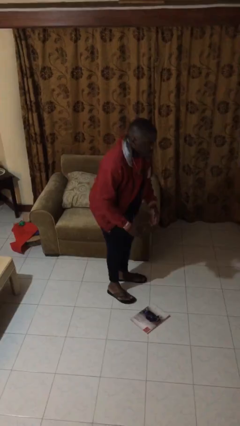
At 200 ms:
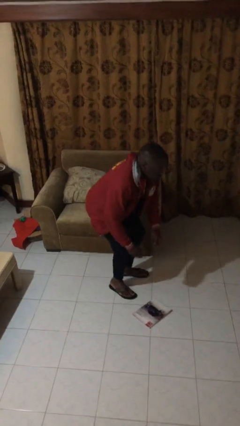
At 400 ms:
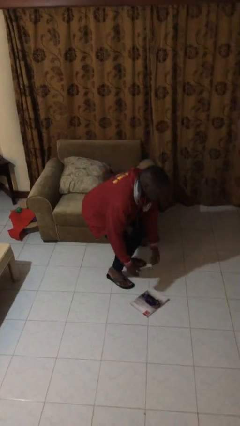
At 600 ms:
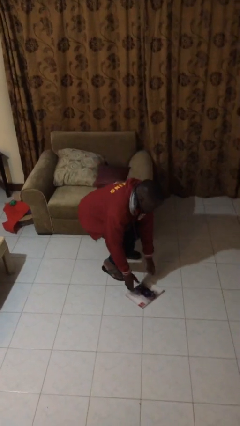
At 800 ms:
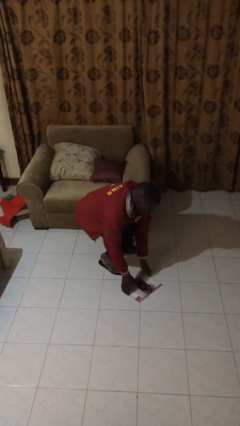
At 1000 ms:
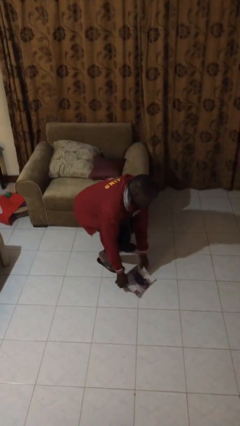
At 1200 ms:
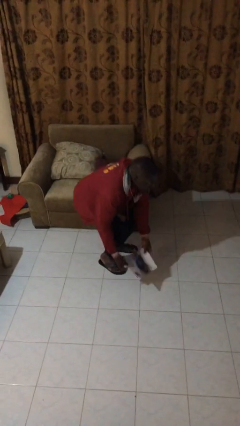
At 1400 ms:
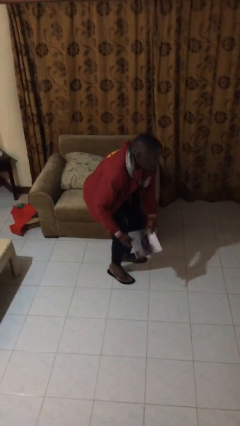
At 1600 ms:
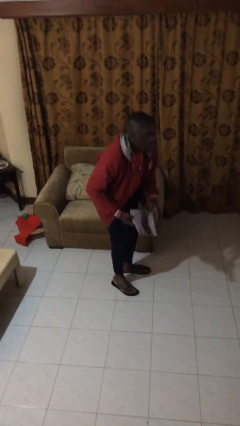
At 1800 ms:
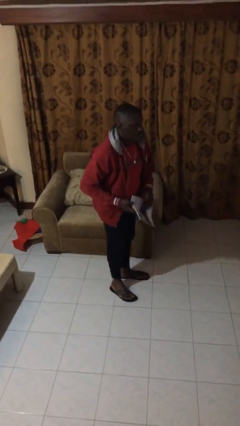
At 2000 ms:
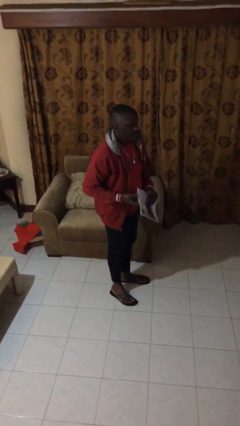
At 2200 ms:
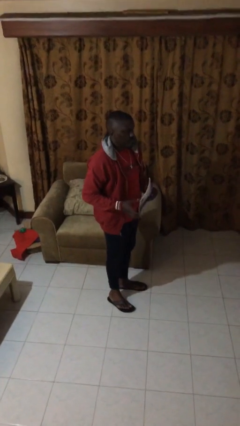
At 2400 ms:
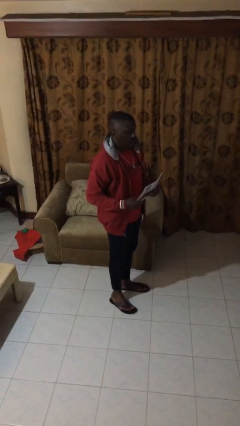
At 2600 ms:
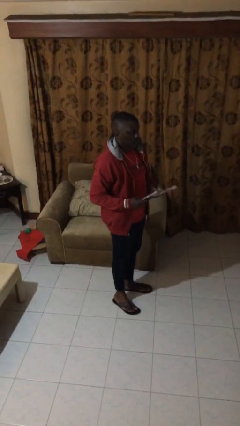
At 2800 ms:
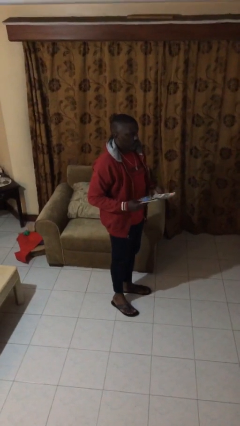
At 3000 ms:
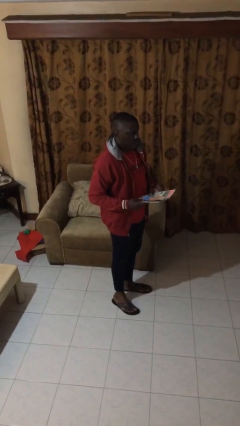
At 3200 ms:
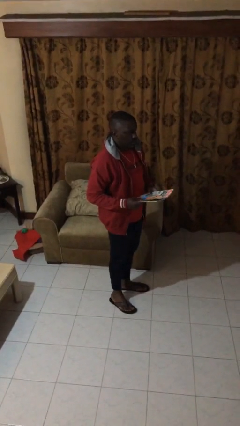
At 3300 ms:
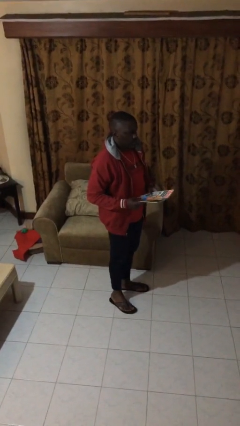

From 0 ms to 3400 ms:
person picks up object from floor

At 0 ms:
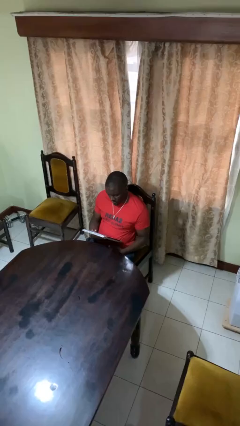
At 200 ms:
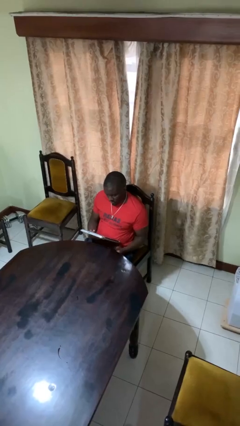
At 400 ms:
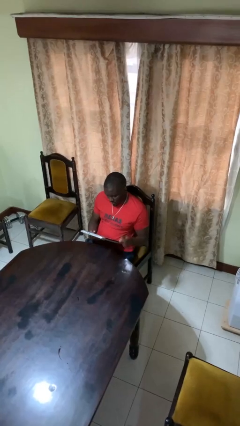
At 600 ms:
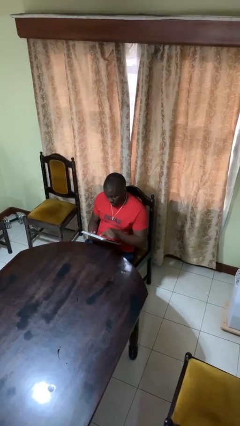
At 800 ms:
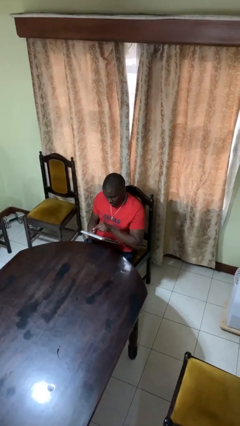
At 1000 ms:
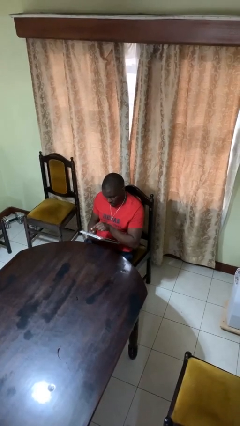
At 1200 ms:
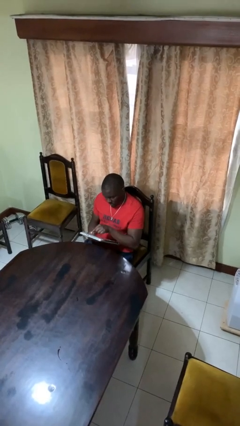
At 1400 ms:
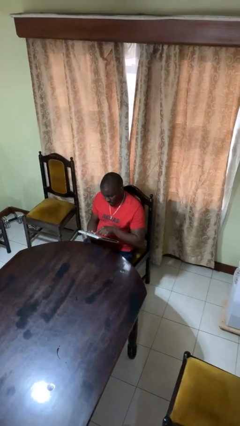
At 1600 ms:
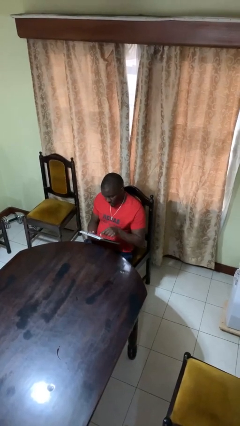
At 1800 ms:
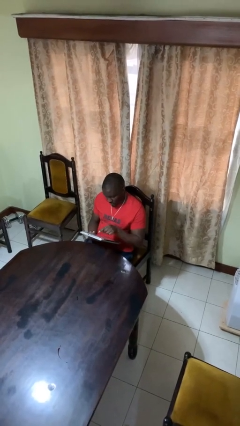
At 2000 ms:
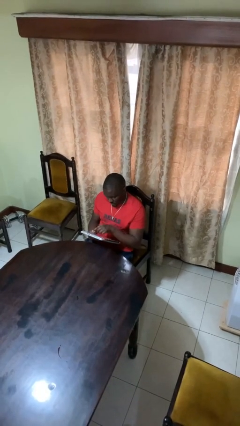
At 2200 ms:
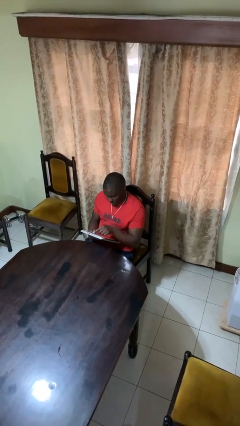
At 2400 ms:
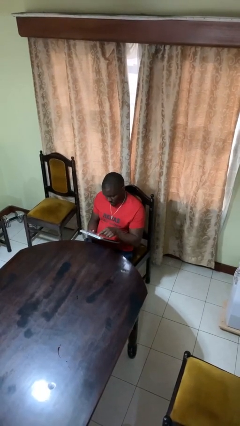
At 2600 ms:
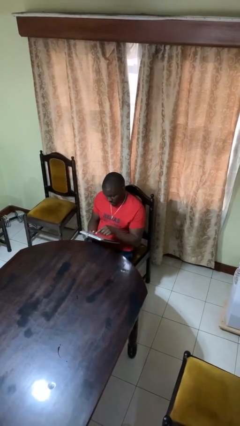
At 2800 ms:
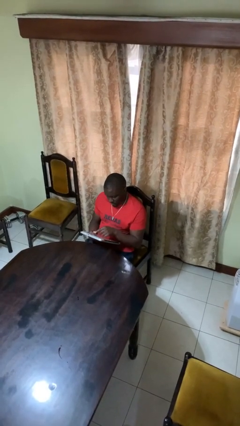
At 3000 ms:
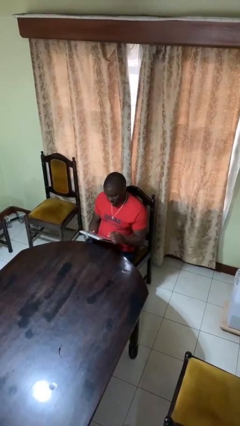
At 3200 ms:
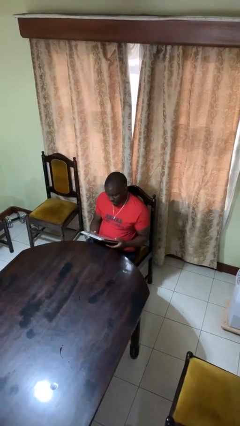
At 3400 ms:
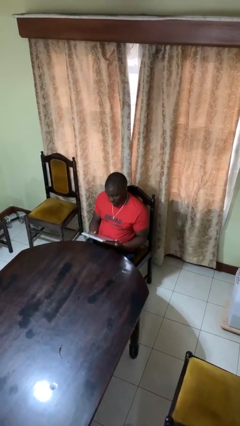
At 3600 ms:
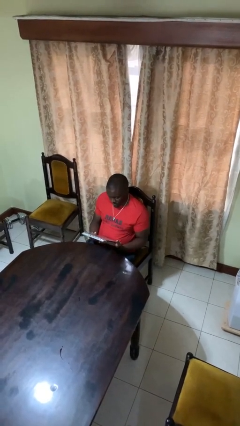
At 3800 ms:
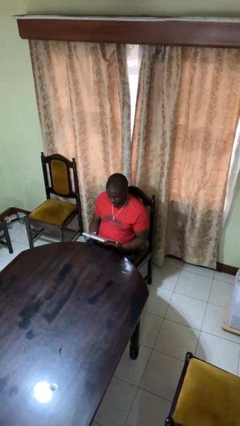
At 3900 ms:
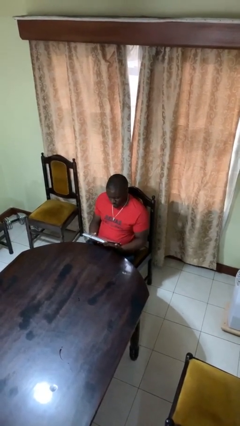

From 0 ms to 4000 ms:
person interacts with tablet

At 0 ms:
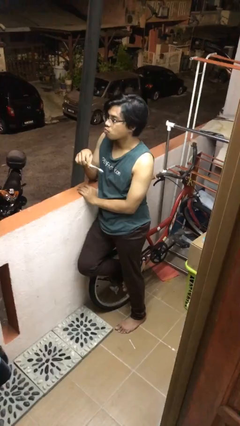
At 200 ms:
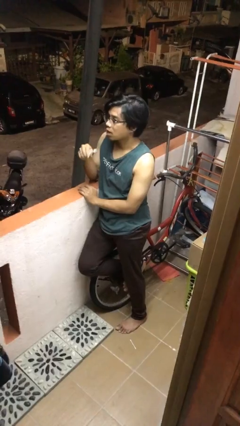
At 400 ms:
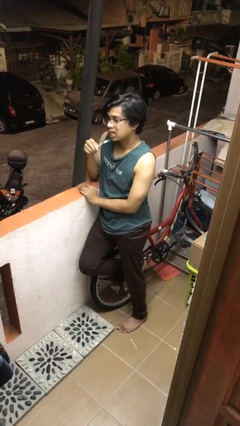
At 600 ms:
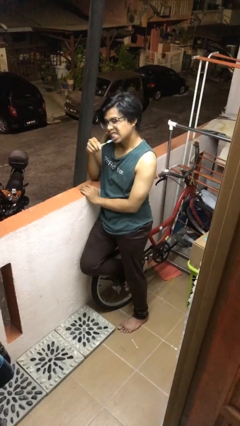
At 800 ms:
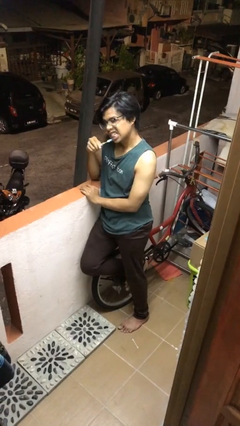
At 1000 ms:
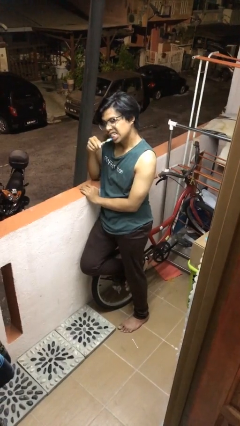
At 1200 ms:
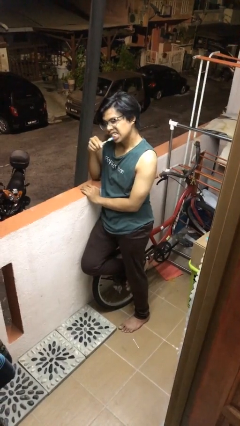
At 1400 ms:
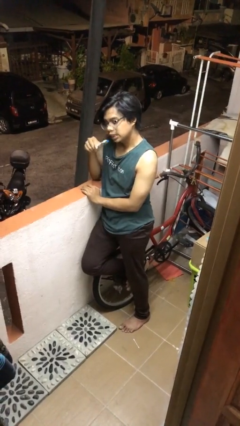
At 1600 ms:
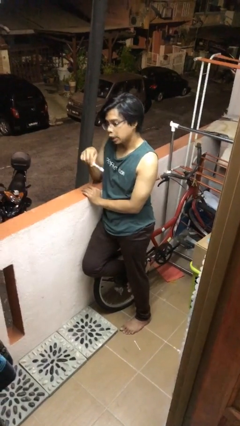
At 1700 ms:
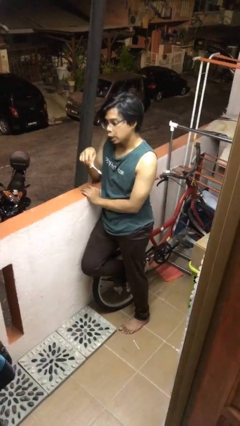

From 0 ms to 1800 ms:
person brushes teeth

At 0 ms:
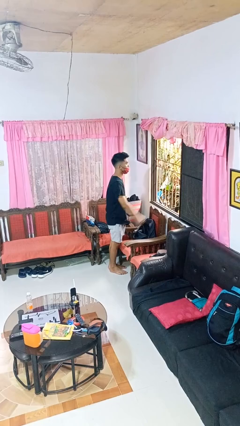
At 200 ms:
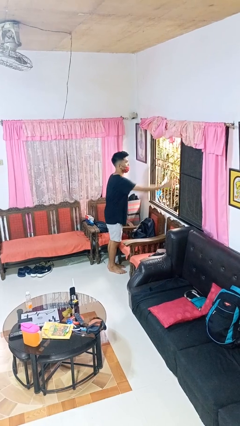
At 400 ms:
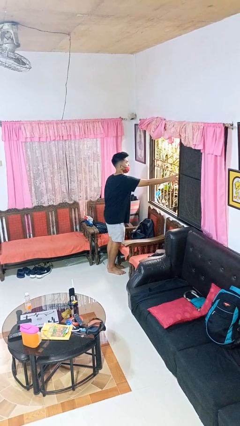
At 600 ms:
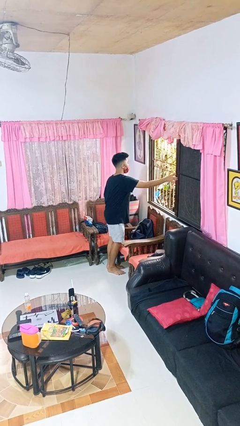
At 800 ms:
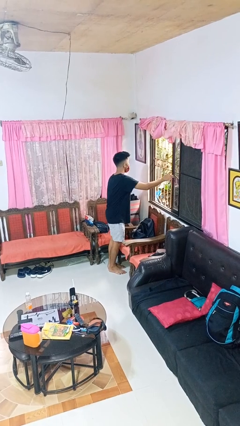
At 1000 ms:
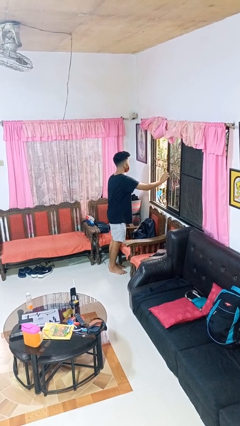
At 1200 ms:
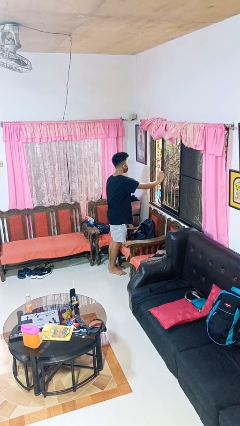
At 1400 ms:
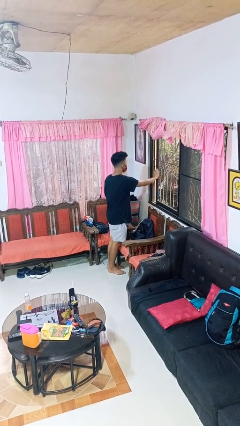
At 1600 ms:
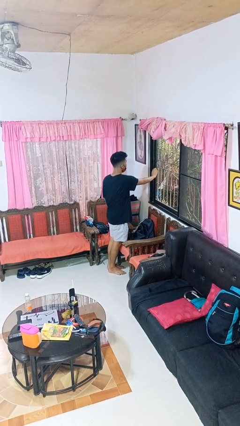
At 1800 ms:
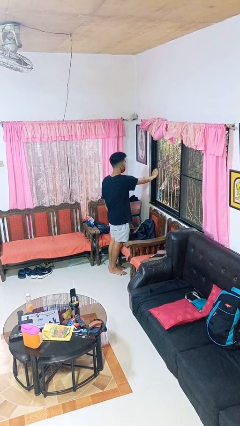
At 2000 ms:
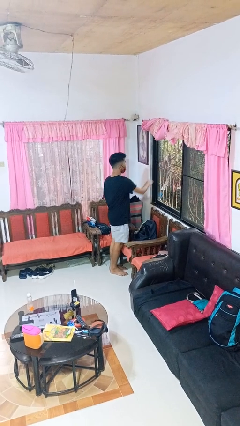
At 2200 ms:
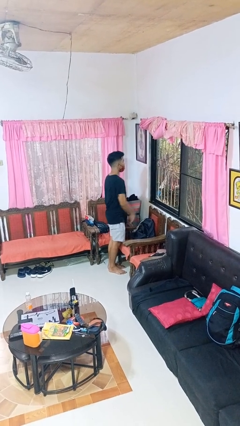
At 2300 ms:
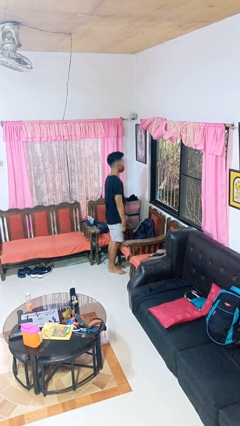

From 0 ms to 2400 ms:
person closes home window

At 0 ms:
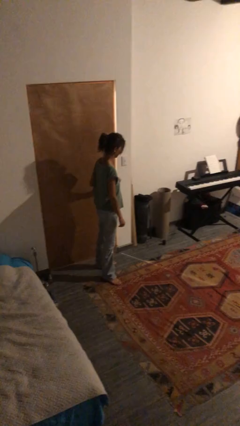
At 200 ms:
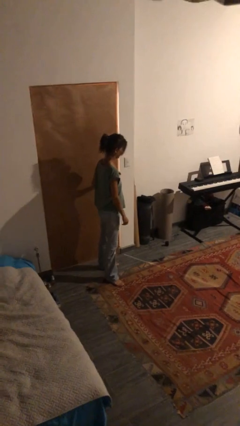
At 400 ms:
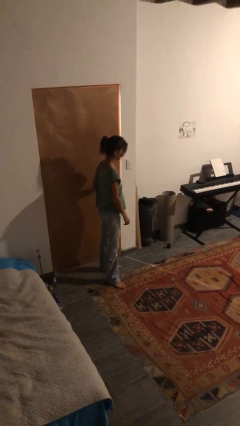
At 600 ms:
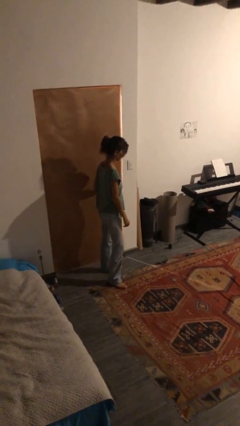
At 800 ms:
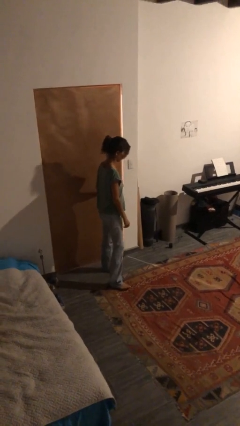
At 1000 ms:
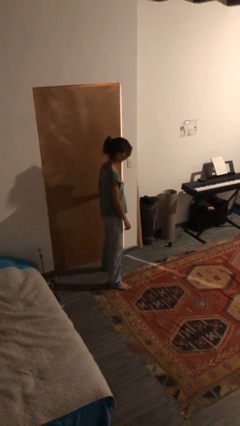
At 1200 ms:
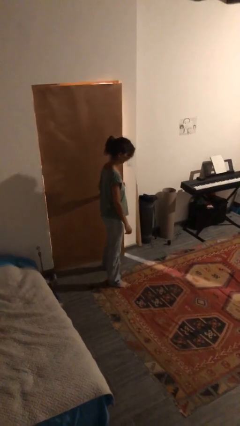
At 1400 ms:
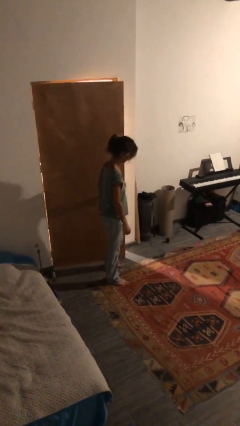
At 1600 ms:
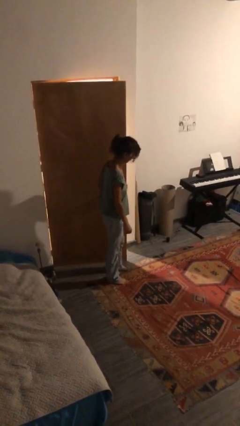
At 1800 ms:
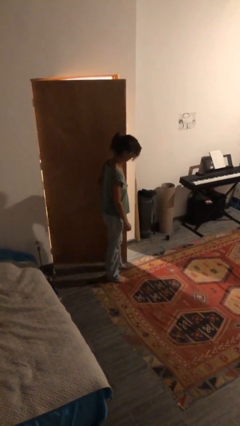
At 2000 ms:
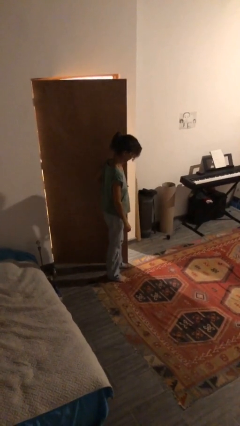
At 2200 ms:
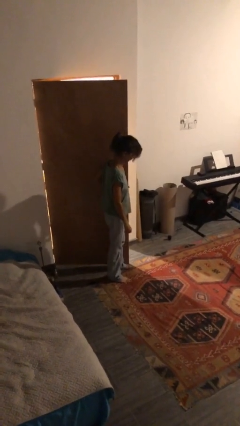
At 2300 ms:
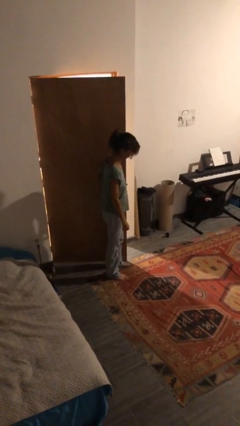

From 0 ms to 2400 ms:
person opens facility door

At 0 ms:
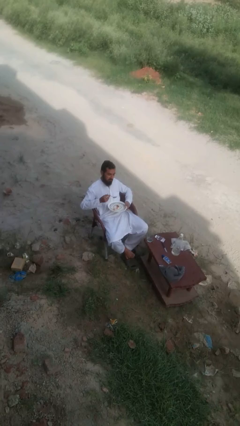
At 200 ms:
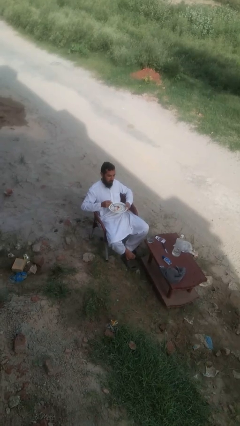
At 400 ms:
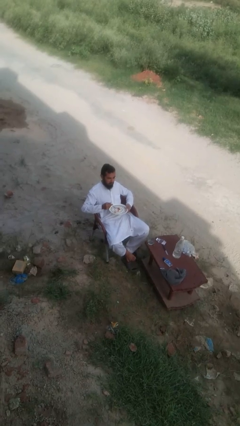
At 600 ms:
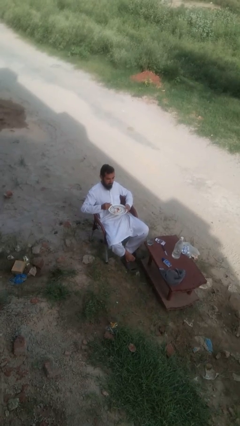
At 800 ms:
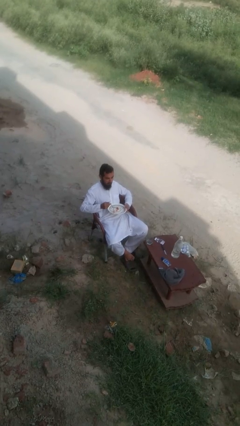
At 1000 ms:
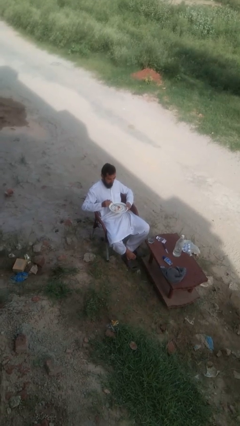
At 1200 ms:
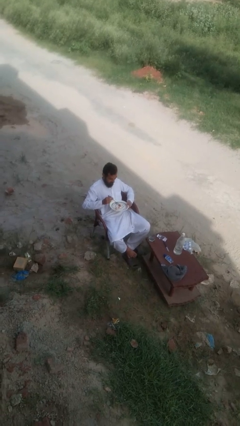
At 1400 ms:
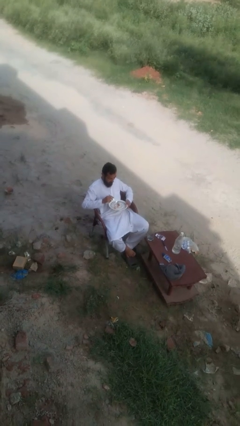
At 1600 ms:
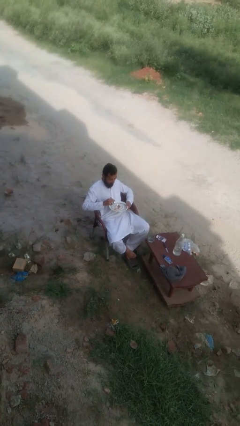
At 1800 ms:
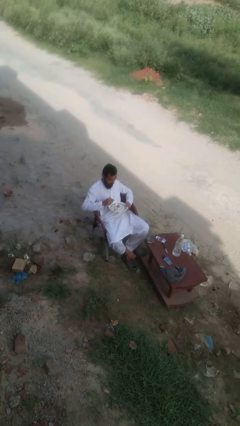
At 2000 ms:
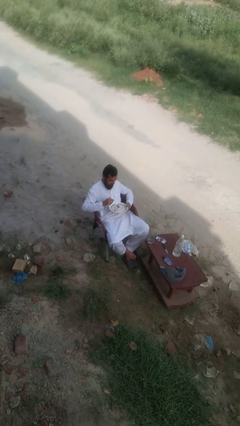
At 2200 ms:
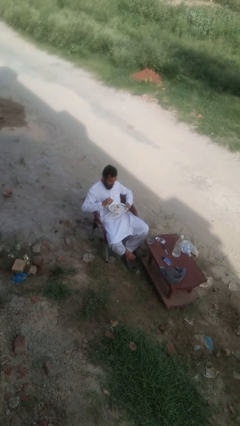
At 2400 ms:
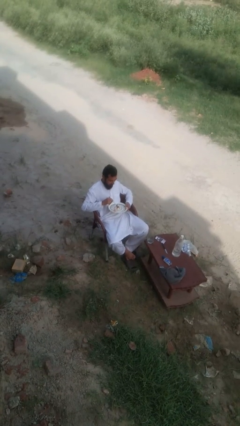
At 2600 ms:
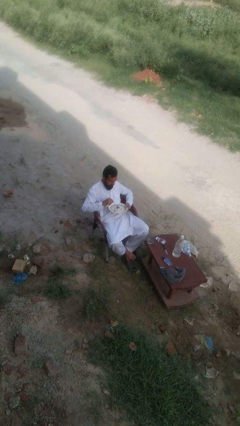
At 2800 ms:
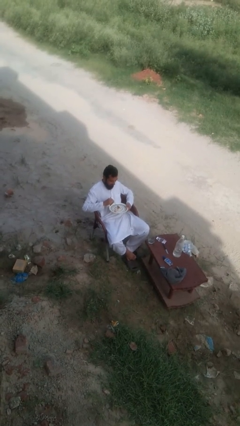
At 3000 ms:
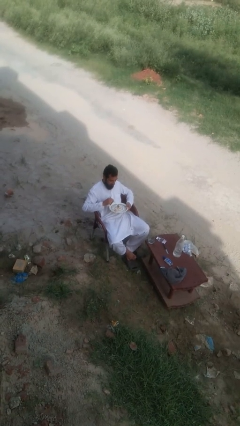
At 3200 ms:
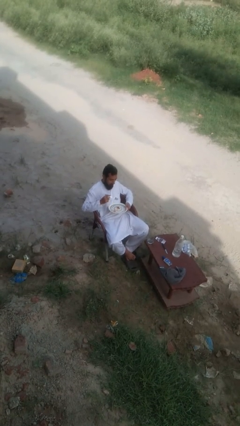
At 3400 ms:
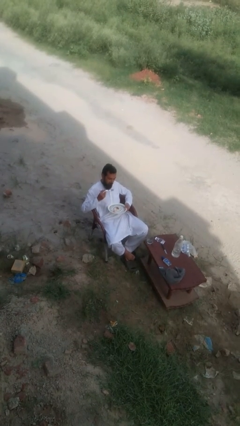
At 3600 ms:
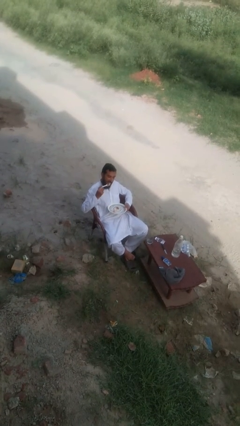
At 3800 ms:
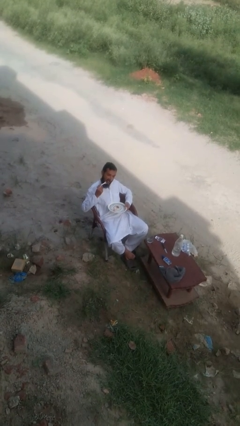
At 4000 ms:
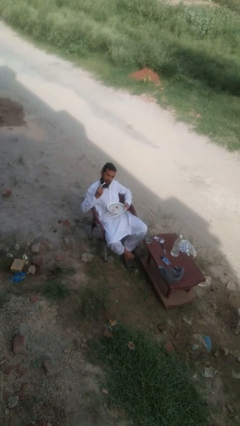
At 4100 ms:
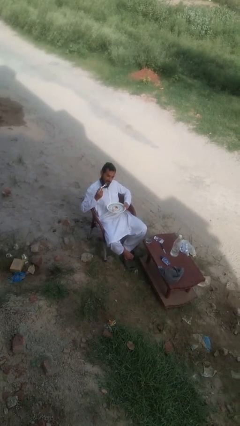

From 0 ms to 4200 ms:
person eats with utensil
